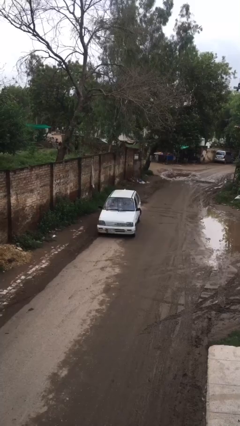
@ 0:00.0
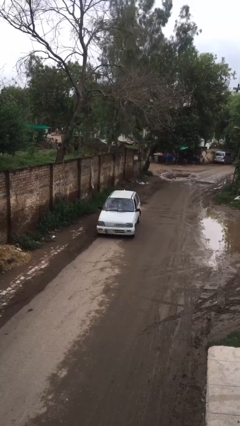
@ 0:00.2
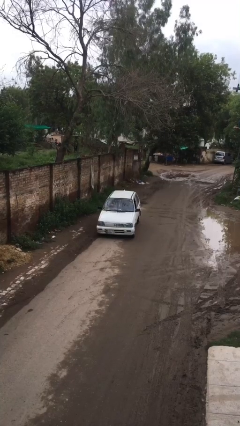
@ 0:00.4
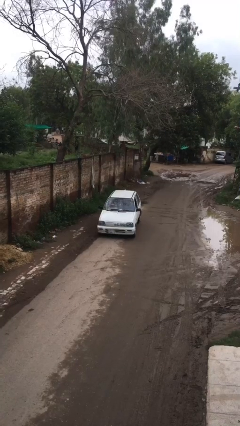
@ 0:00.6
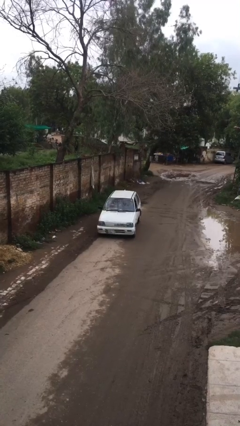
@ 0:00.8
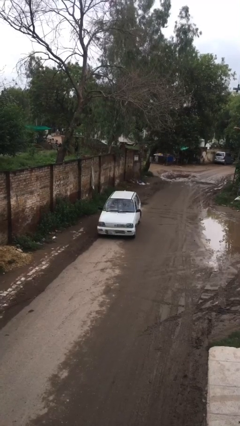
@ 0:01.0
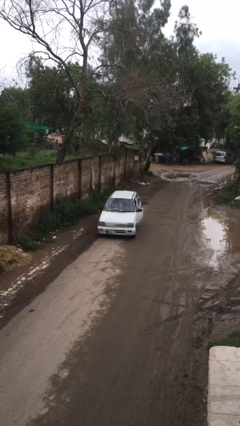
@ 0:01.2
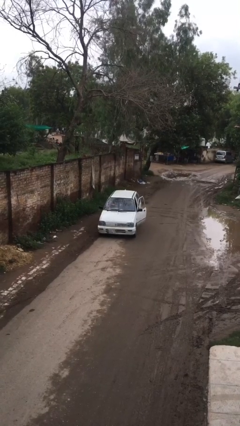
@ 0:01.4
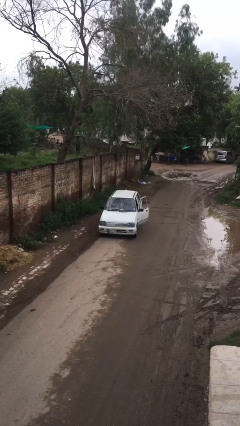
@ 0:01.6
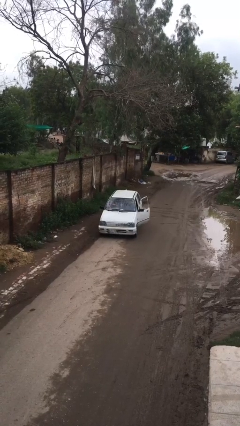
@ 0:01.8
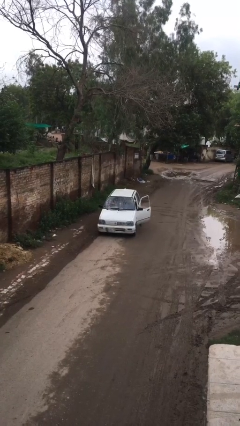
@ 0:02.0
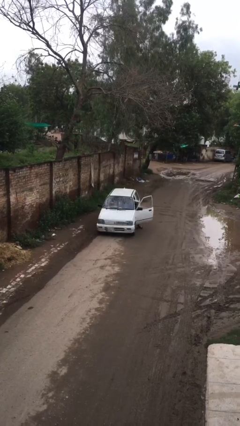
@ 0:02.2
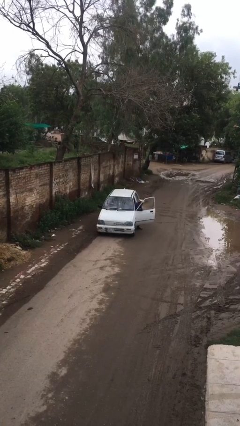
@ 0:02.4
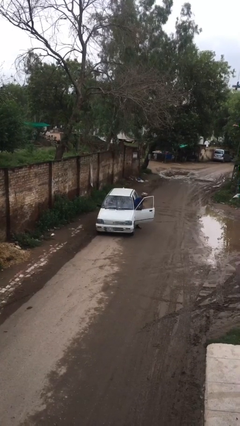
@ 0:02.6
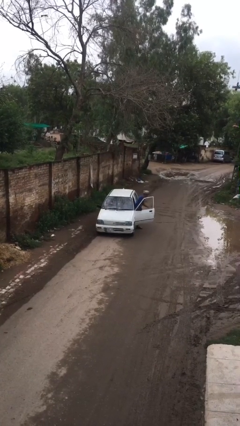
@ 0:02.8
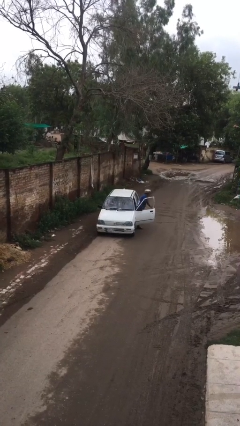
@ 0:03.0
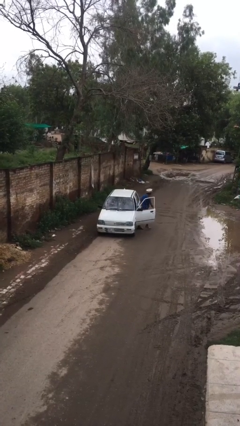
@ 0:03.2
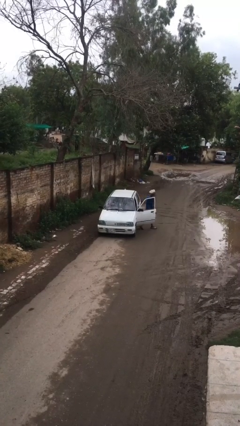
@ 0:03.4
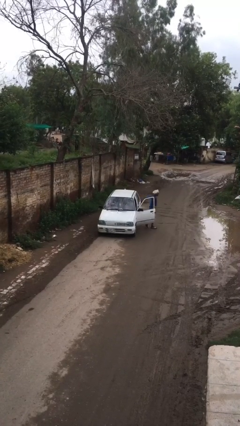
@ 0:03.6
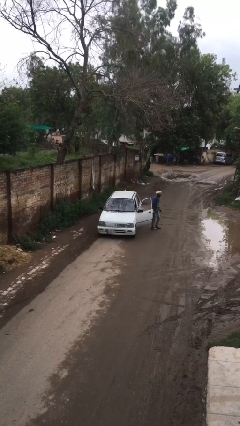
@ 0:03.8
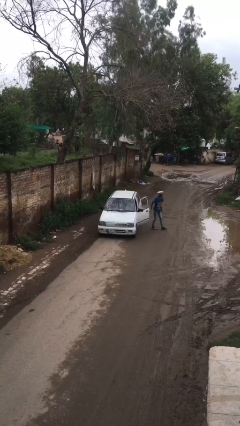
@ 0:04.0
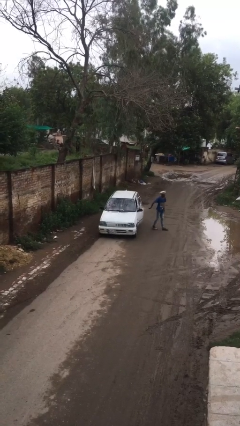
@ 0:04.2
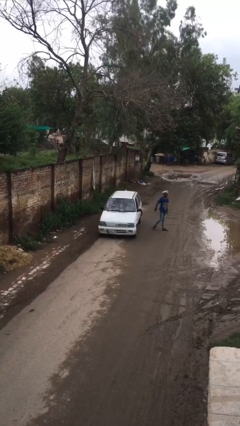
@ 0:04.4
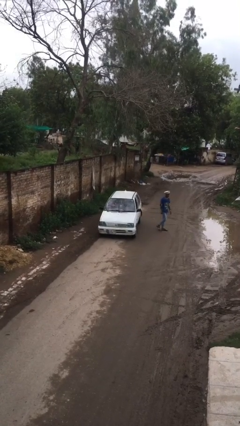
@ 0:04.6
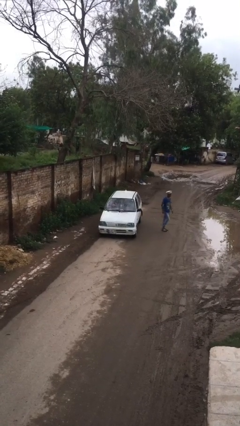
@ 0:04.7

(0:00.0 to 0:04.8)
car drops off person

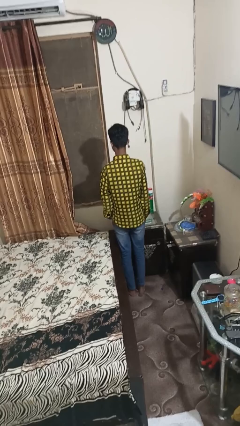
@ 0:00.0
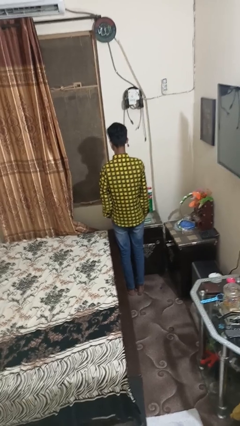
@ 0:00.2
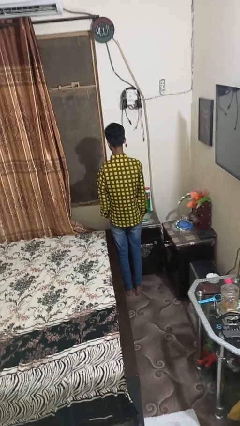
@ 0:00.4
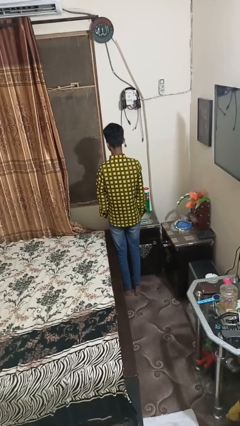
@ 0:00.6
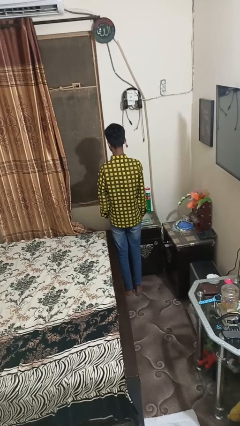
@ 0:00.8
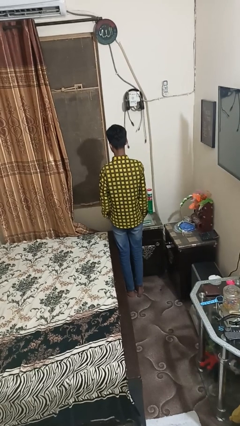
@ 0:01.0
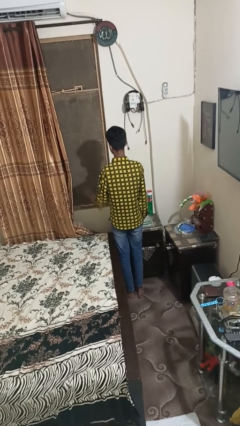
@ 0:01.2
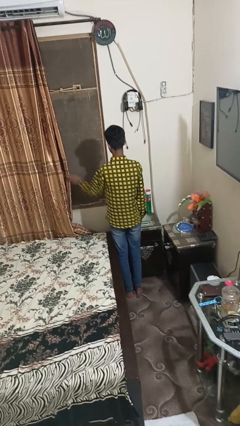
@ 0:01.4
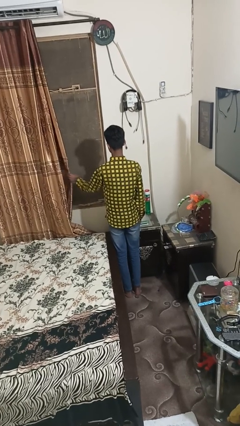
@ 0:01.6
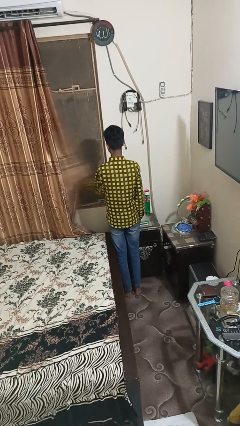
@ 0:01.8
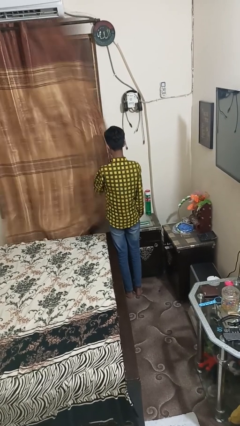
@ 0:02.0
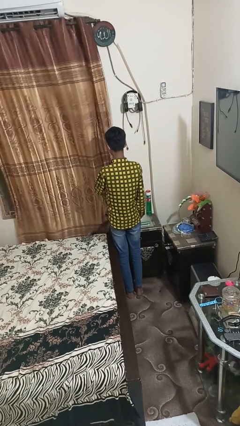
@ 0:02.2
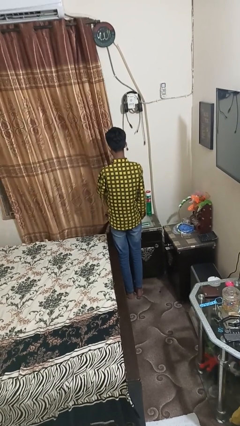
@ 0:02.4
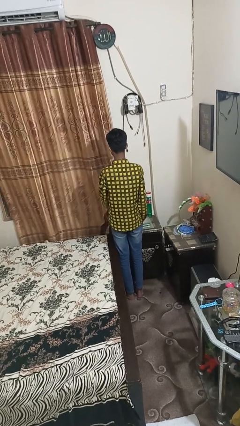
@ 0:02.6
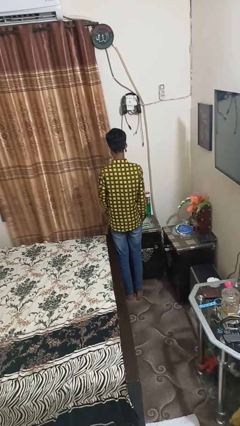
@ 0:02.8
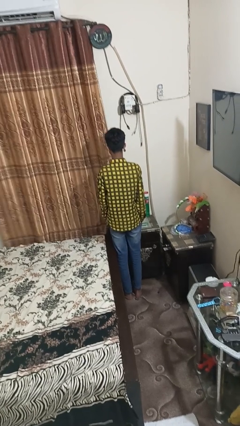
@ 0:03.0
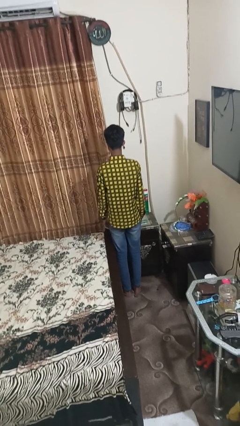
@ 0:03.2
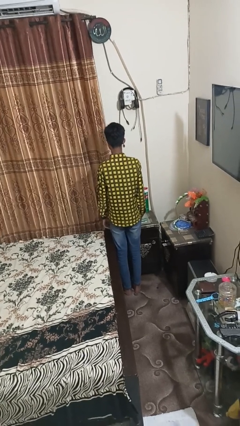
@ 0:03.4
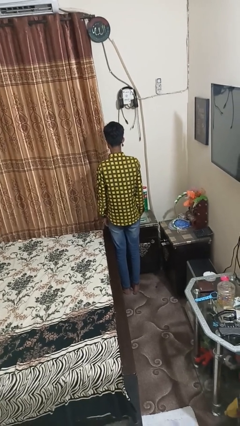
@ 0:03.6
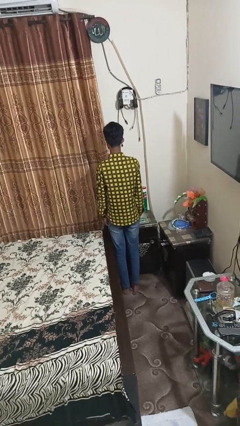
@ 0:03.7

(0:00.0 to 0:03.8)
person closes curtains

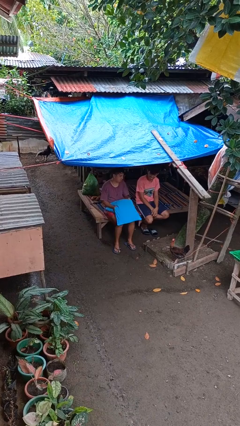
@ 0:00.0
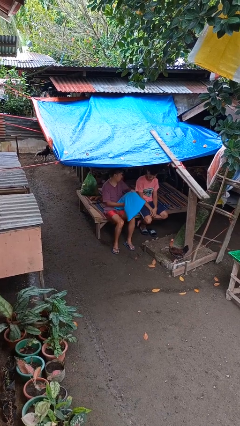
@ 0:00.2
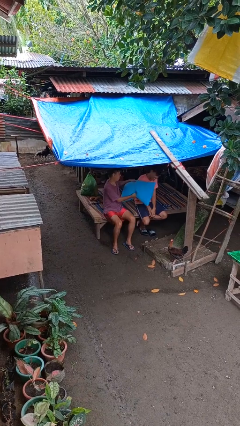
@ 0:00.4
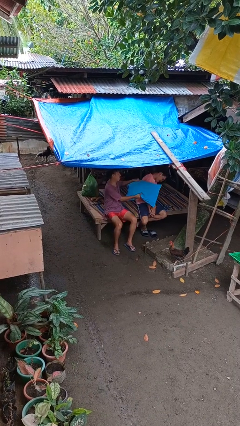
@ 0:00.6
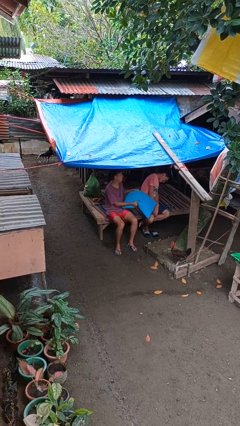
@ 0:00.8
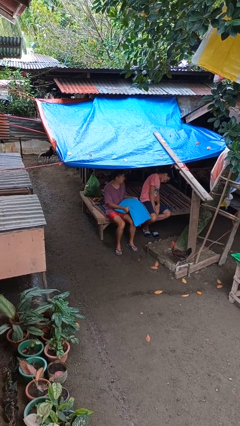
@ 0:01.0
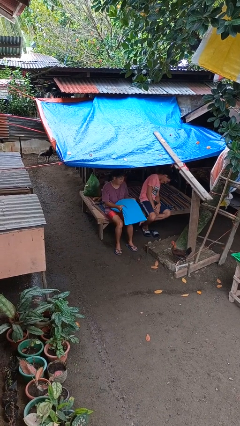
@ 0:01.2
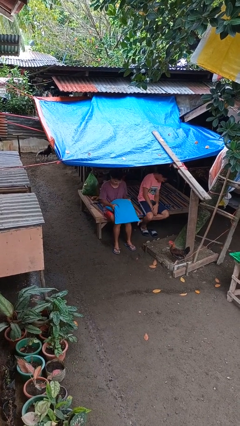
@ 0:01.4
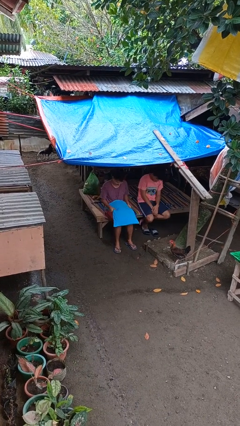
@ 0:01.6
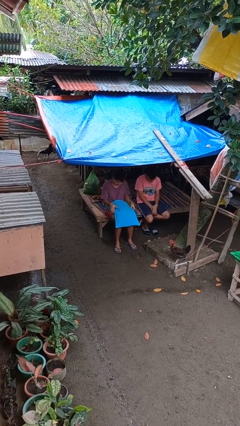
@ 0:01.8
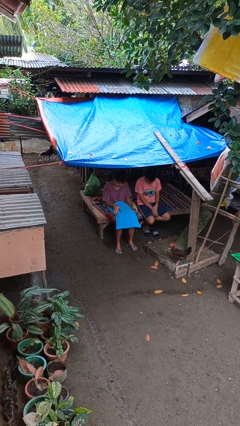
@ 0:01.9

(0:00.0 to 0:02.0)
person hits person with pillow

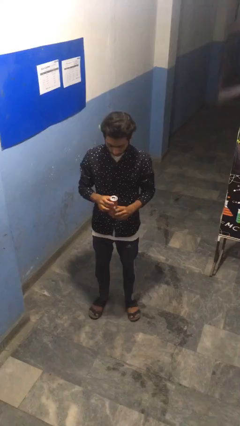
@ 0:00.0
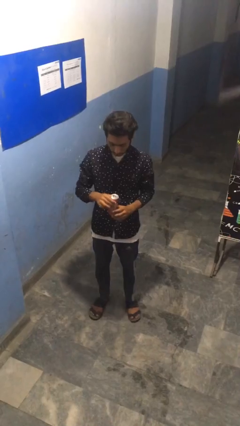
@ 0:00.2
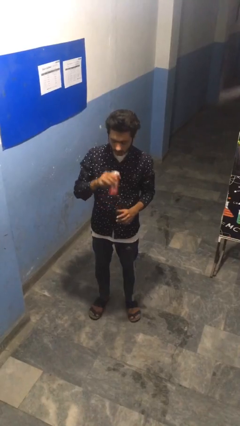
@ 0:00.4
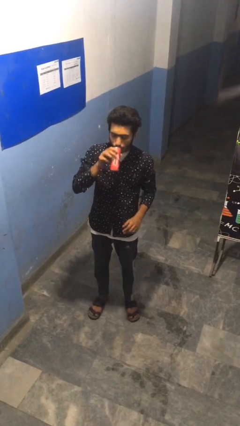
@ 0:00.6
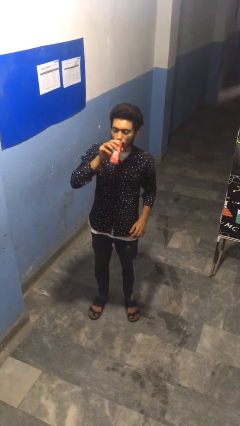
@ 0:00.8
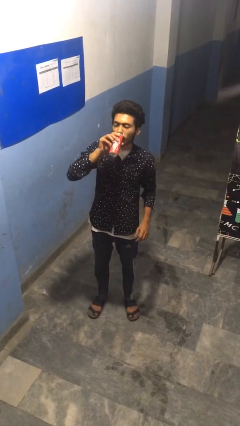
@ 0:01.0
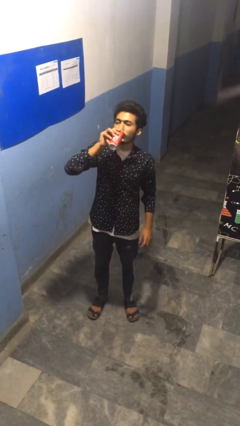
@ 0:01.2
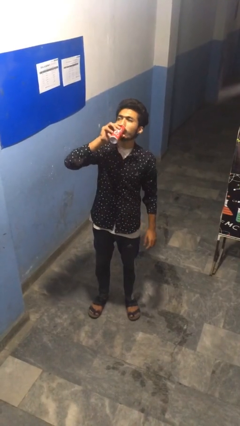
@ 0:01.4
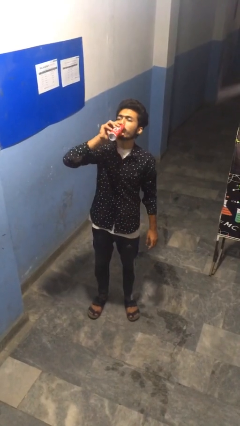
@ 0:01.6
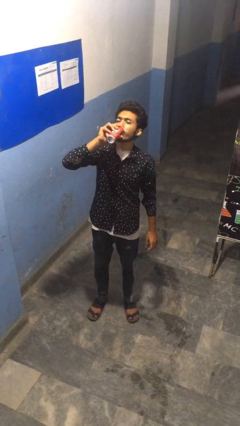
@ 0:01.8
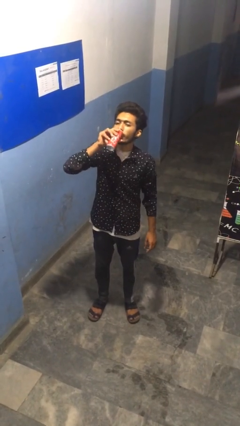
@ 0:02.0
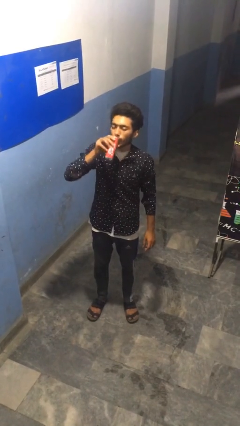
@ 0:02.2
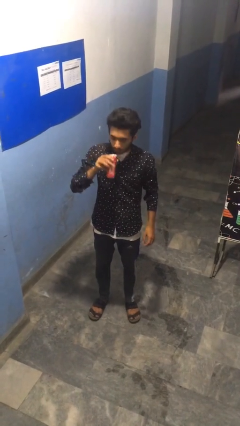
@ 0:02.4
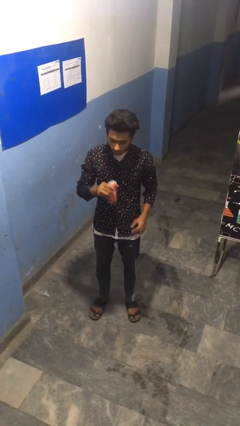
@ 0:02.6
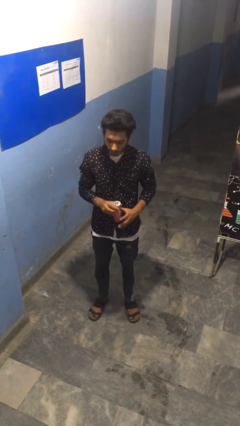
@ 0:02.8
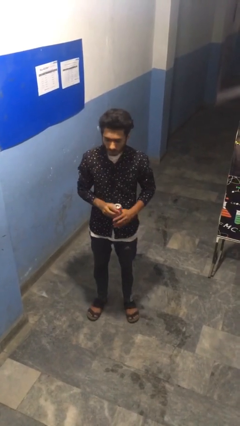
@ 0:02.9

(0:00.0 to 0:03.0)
person drinks from beverage can

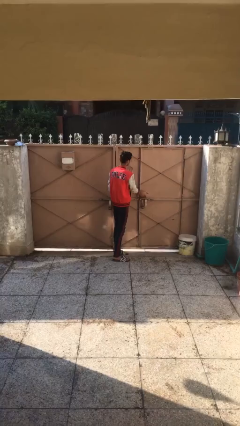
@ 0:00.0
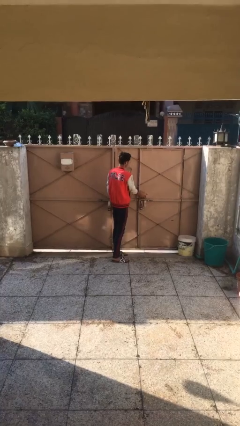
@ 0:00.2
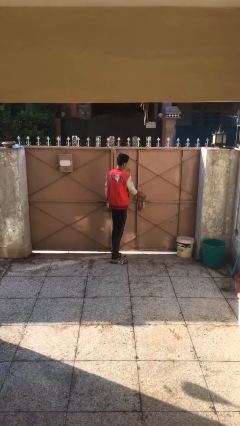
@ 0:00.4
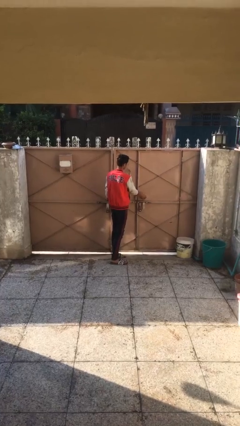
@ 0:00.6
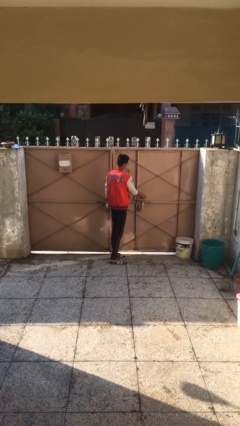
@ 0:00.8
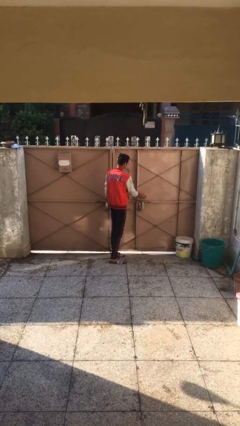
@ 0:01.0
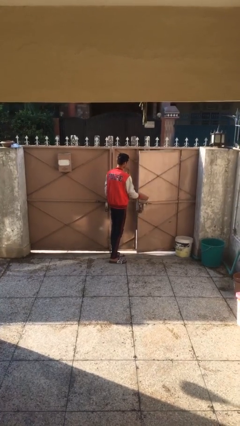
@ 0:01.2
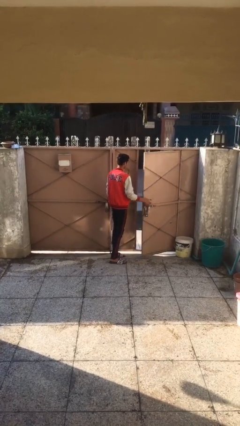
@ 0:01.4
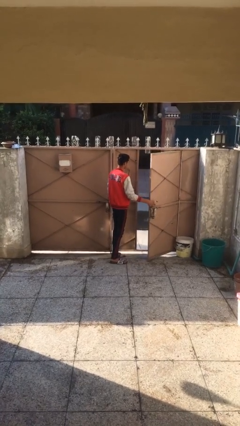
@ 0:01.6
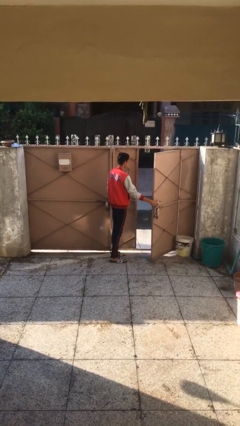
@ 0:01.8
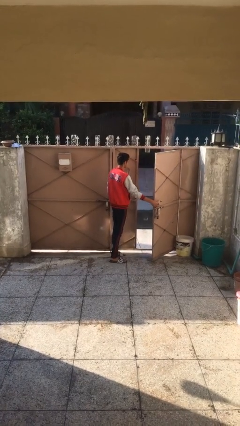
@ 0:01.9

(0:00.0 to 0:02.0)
person opens facility door

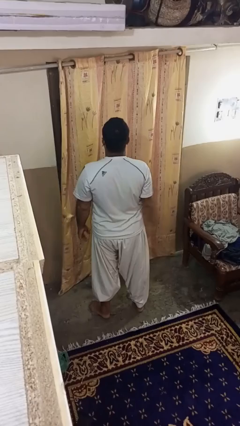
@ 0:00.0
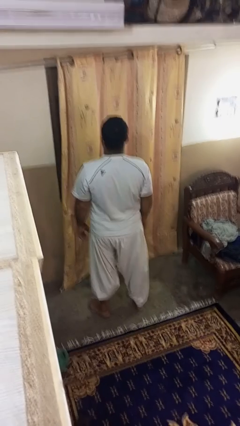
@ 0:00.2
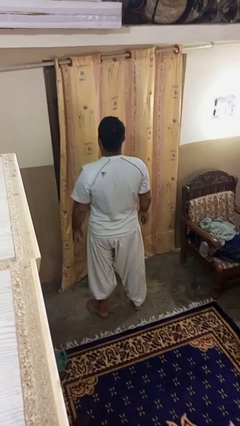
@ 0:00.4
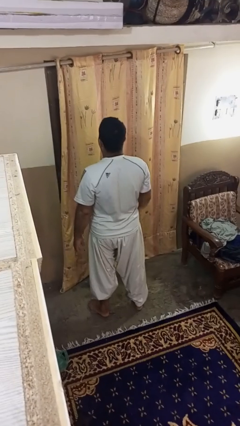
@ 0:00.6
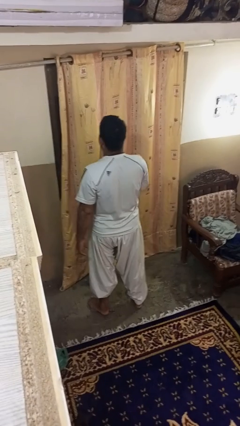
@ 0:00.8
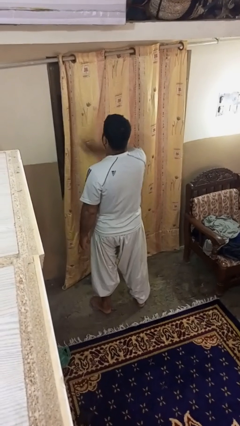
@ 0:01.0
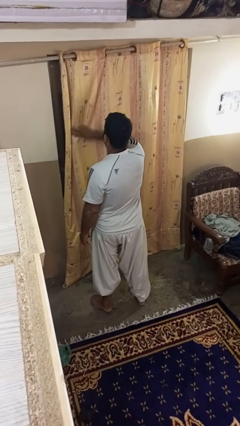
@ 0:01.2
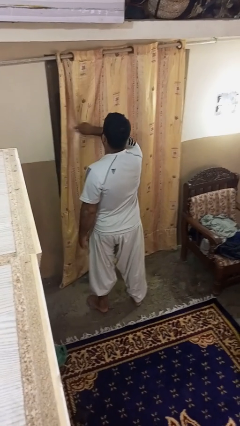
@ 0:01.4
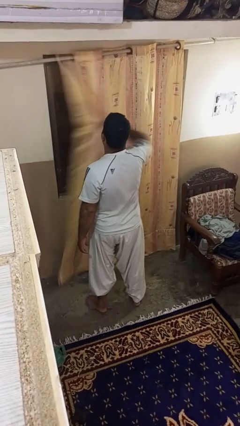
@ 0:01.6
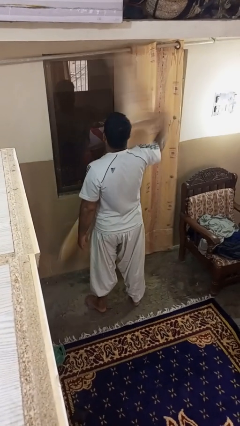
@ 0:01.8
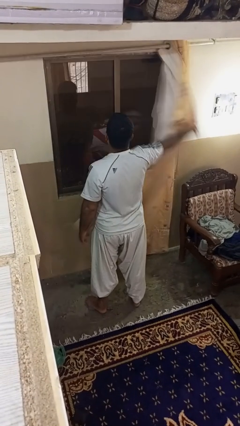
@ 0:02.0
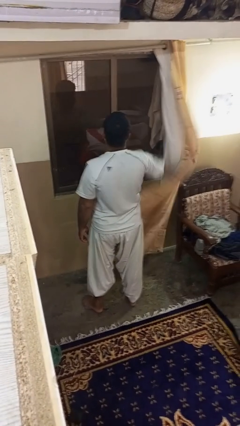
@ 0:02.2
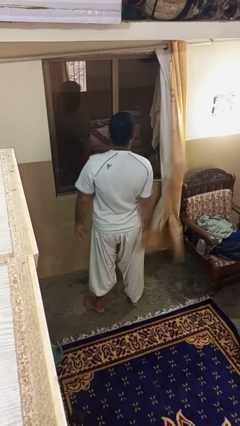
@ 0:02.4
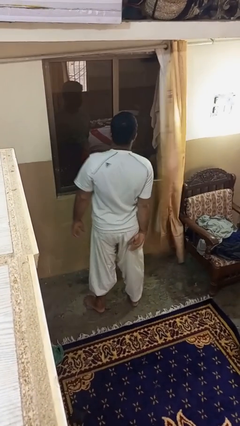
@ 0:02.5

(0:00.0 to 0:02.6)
person opens curtains
